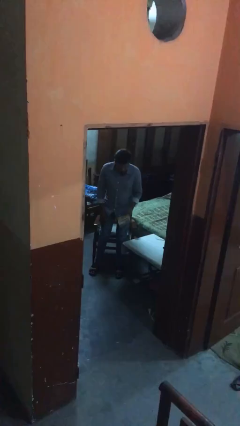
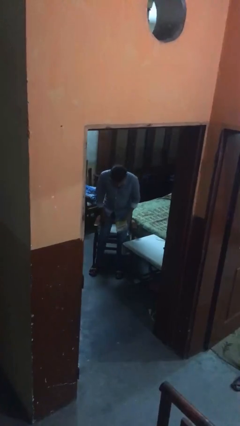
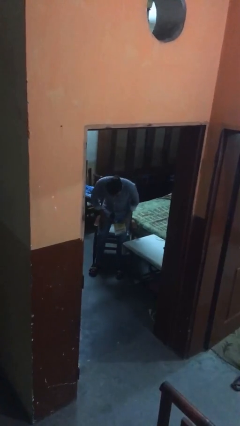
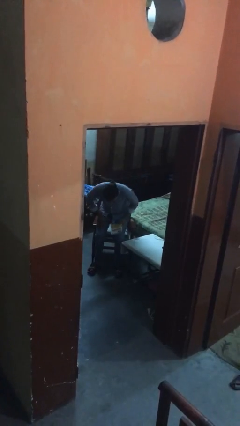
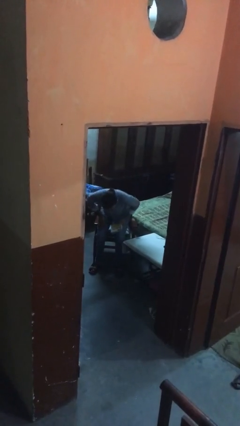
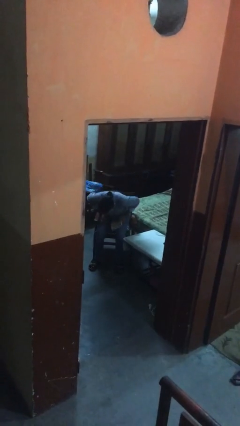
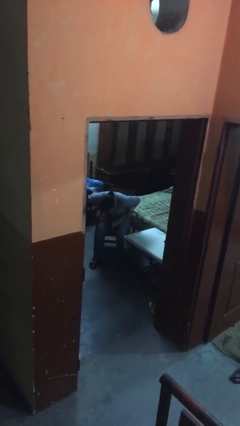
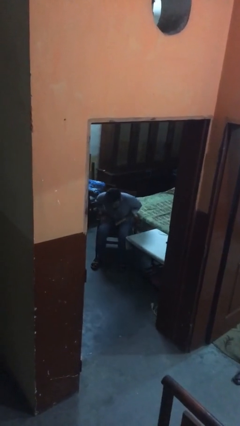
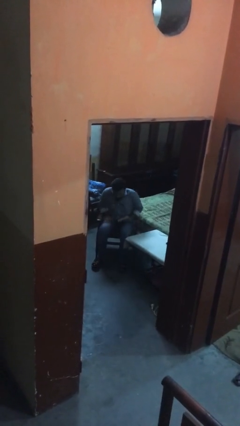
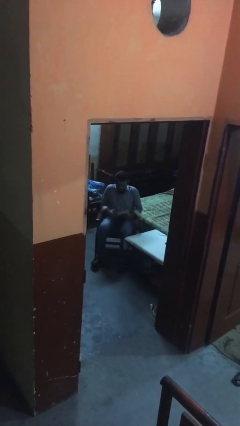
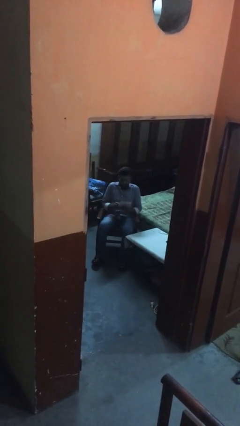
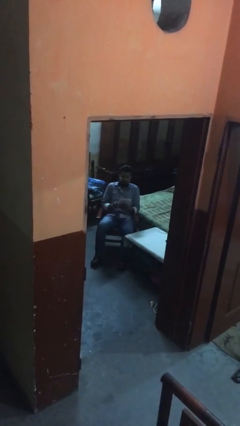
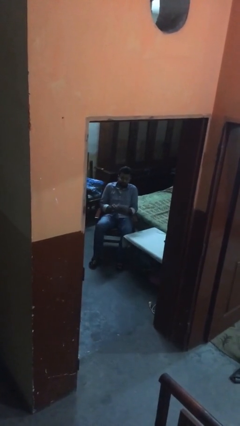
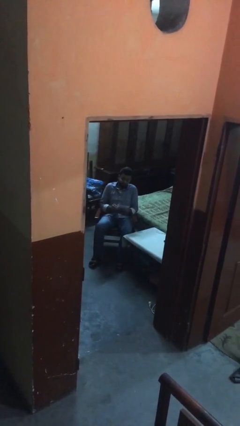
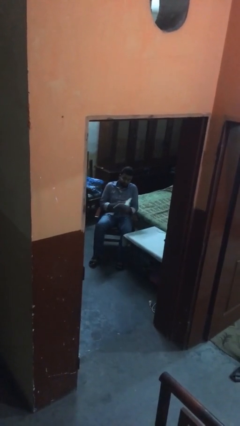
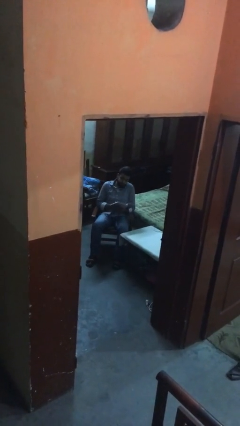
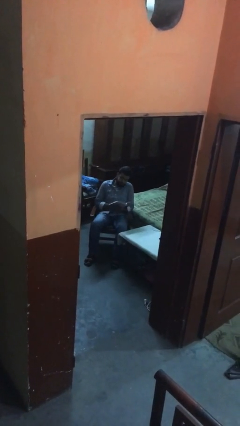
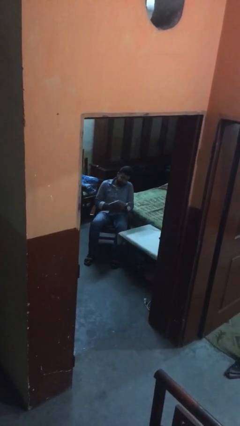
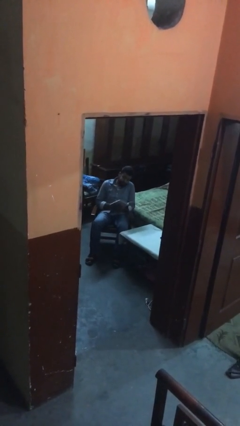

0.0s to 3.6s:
person sits down

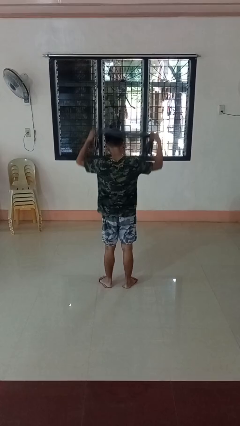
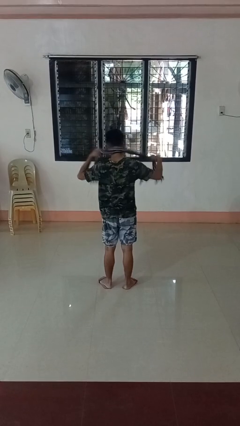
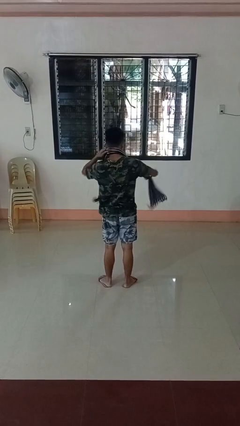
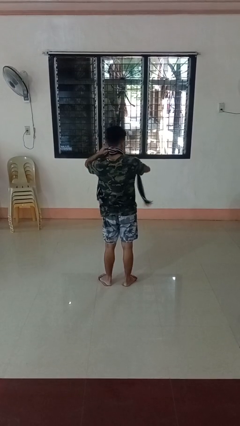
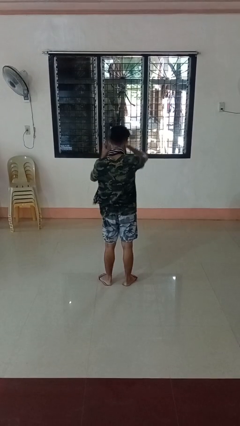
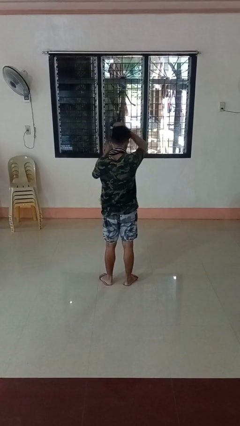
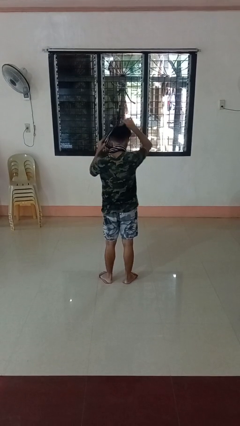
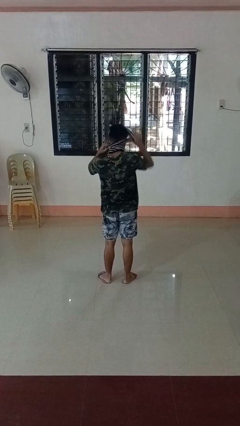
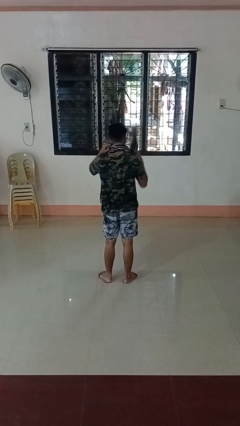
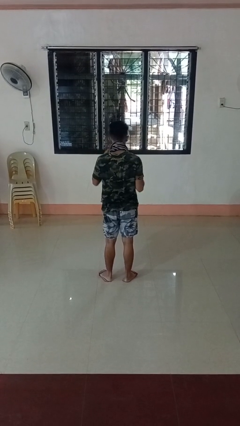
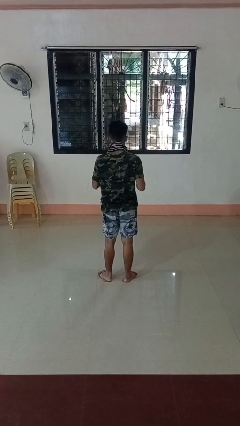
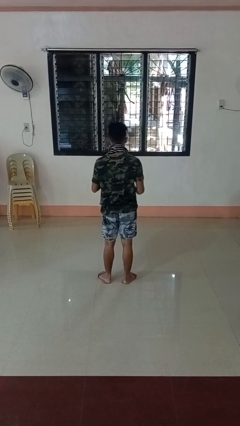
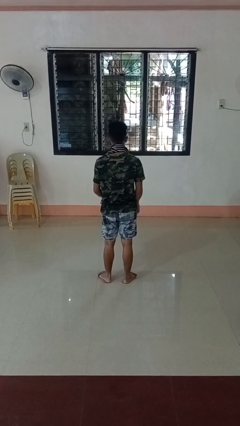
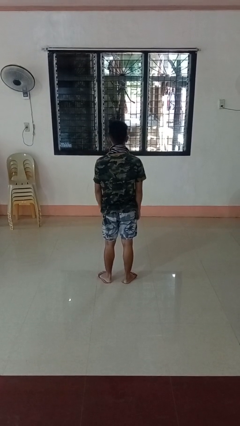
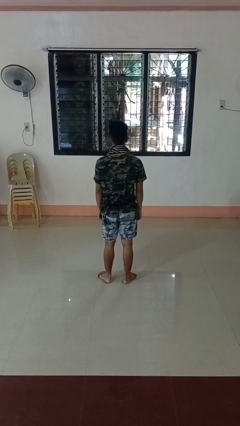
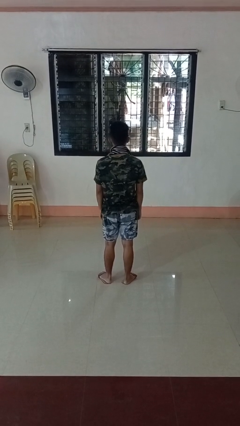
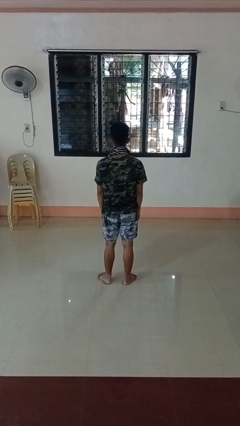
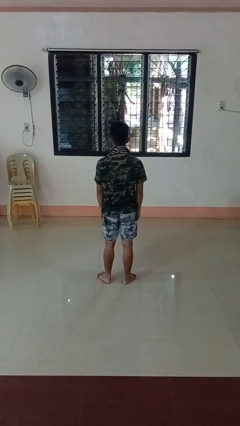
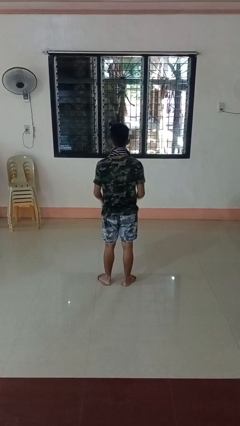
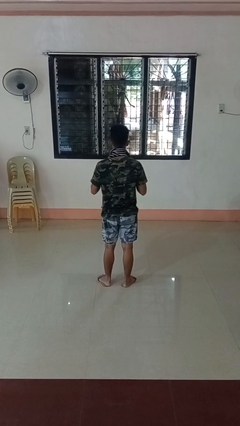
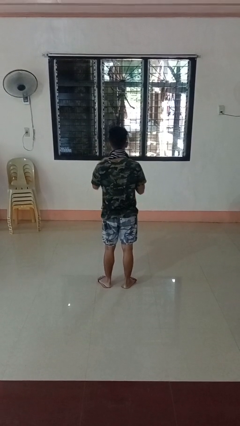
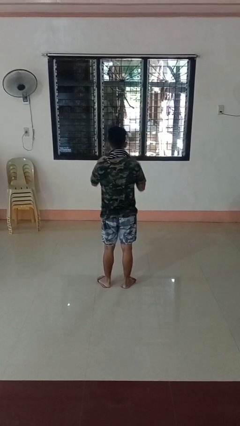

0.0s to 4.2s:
person puts on scarf

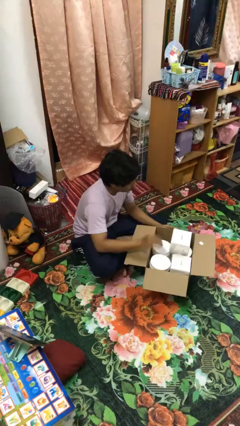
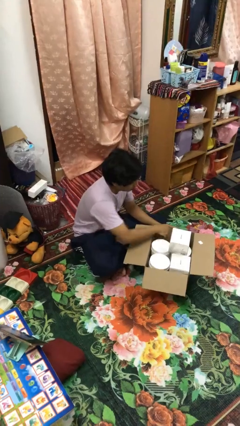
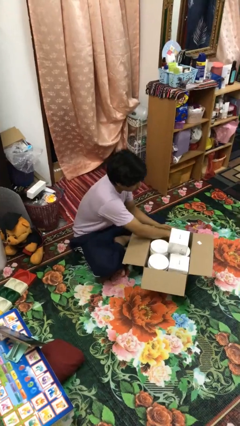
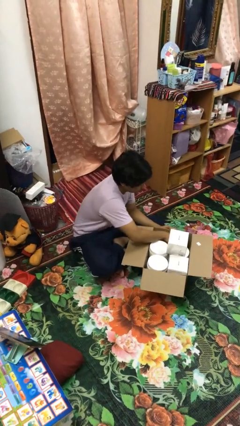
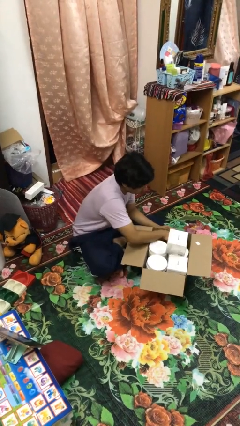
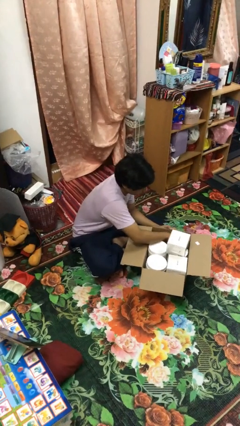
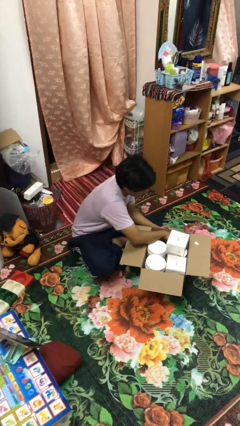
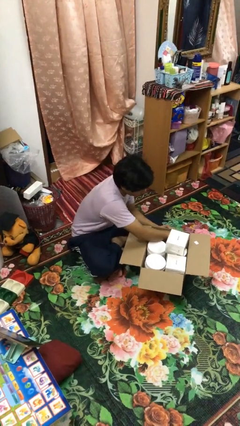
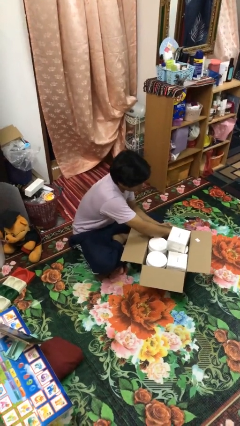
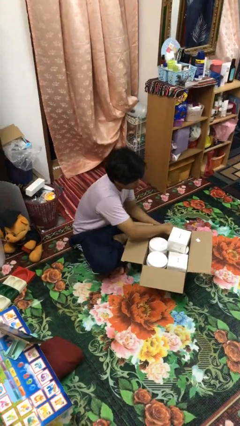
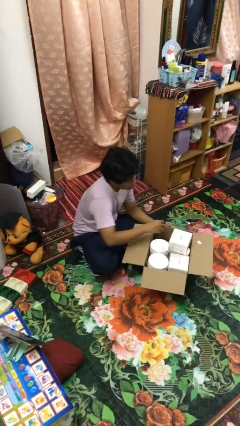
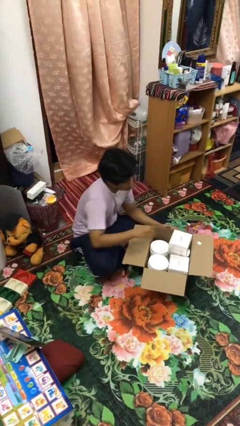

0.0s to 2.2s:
person searches in box

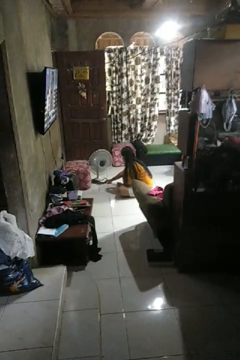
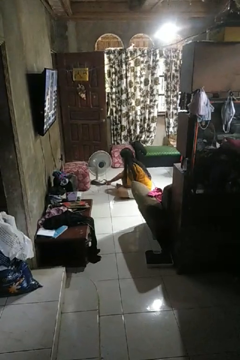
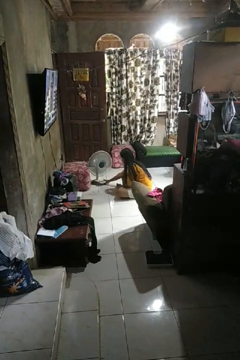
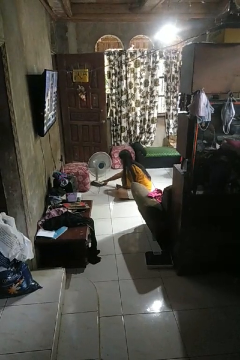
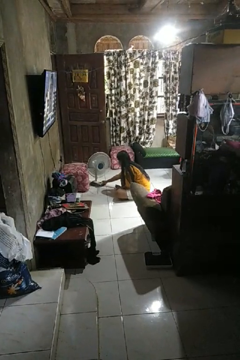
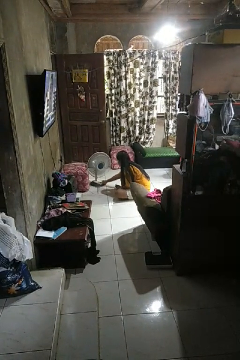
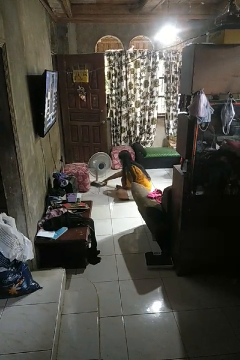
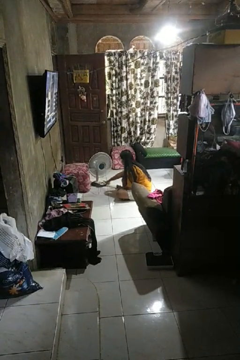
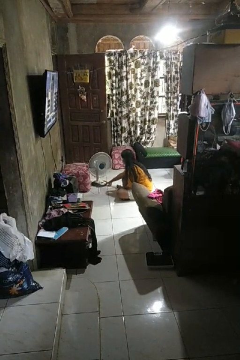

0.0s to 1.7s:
person turns off fan

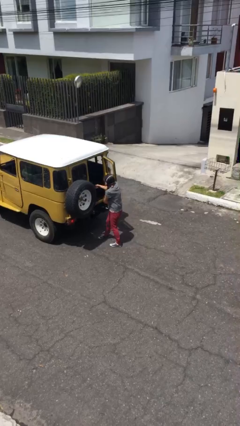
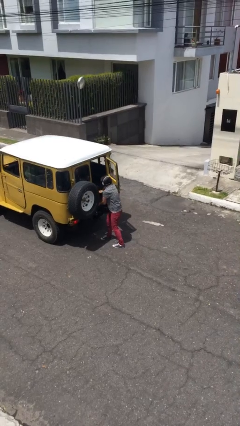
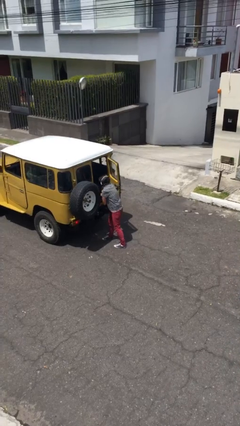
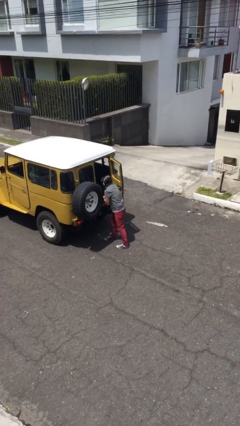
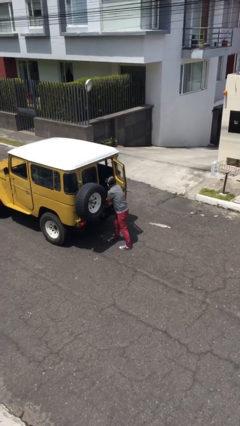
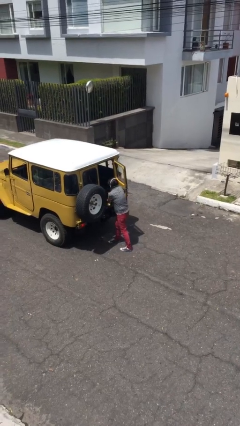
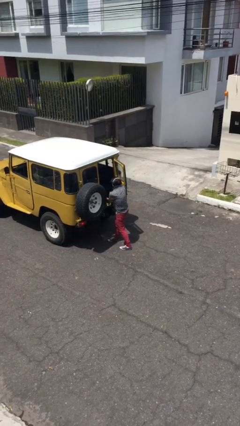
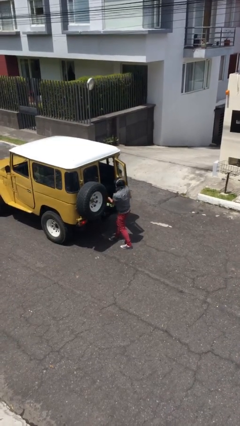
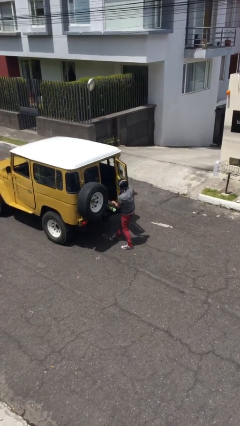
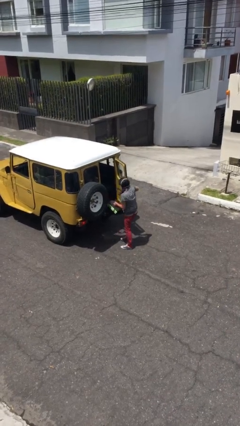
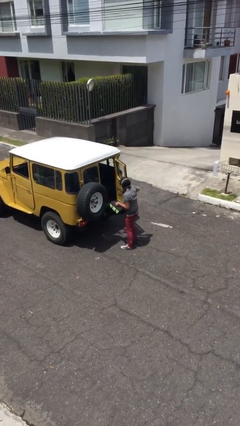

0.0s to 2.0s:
person unloads car

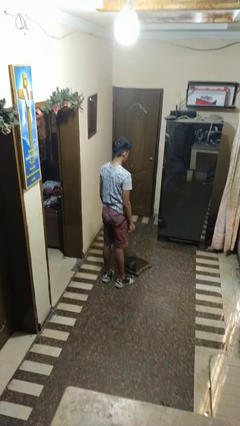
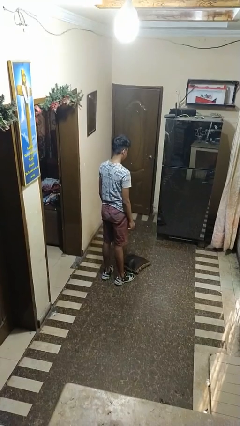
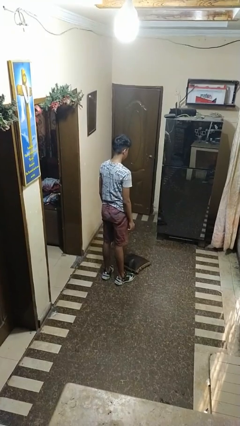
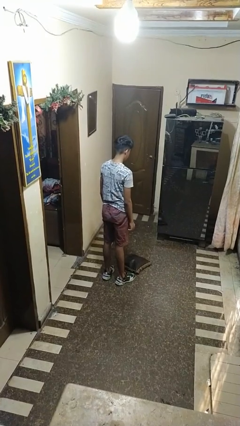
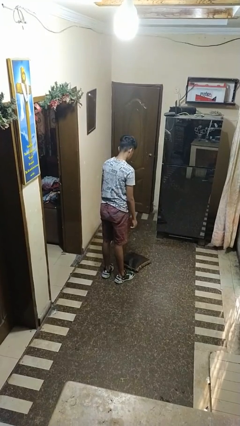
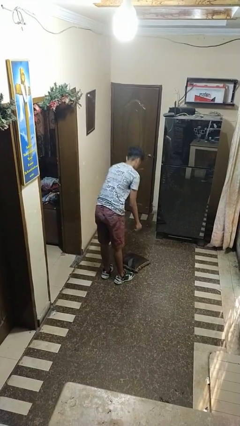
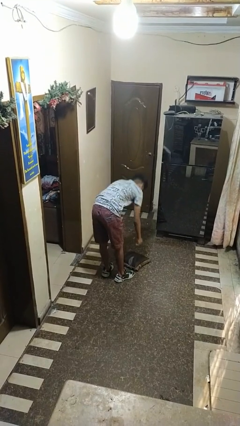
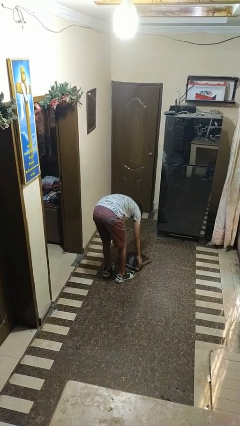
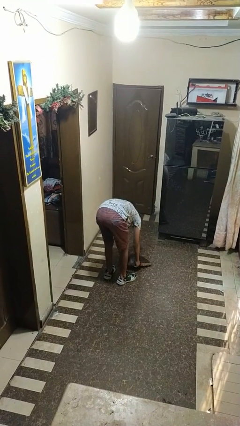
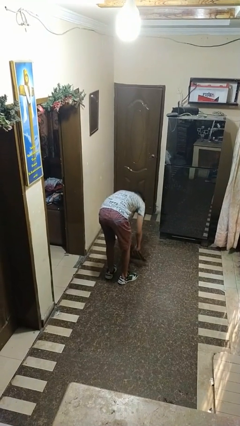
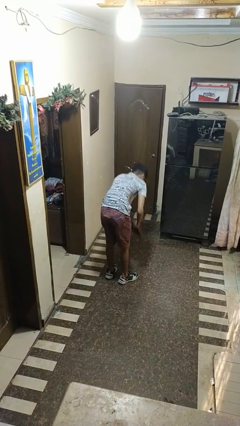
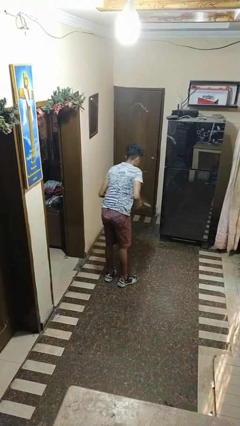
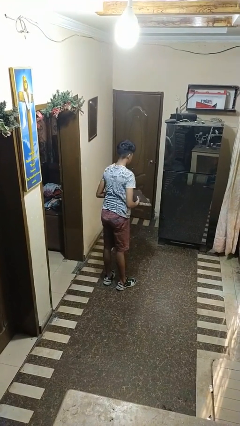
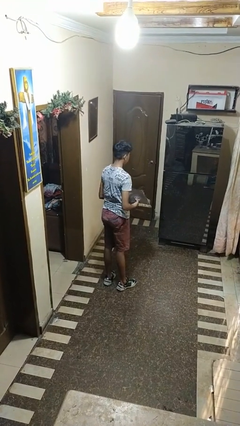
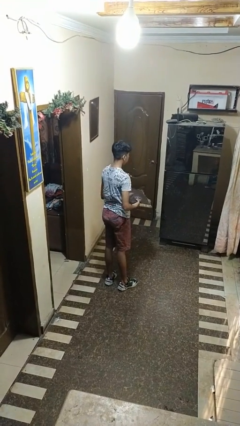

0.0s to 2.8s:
person picks up object from floor

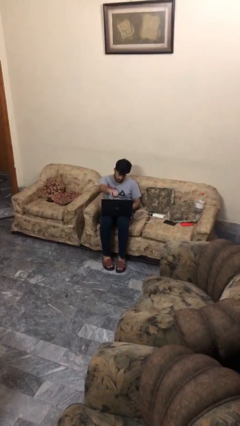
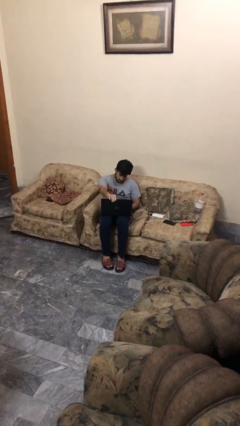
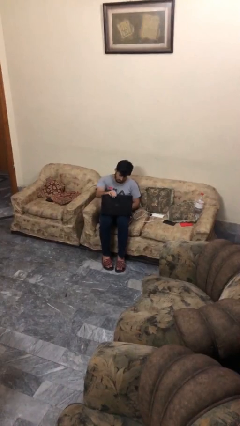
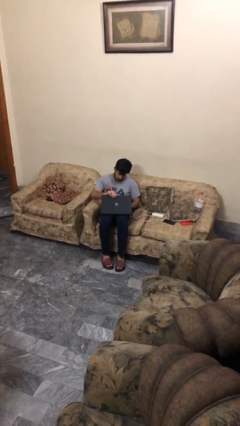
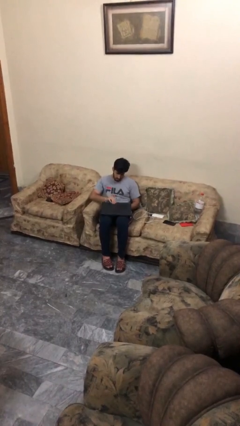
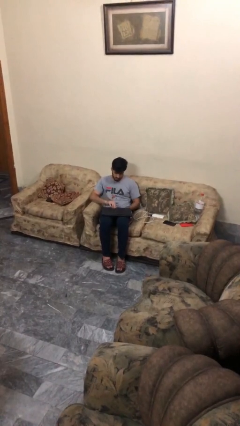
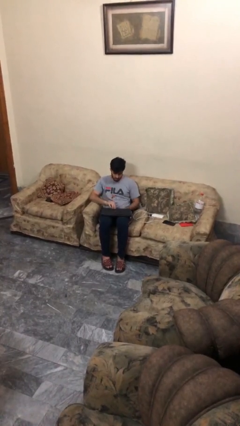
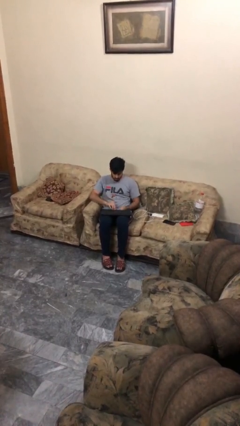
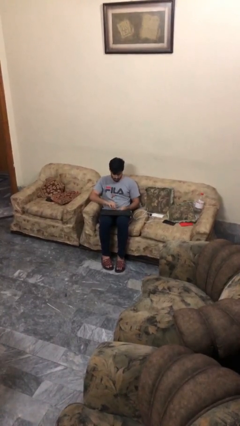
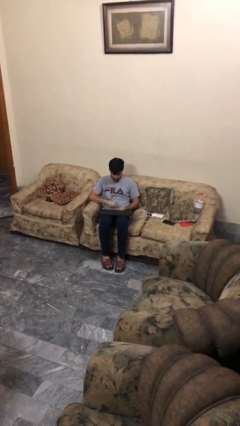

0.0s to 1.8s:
person closes laptop
